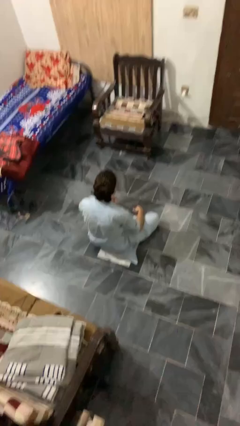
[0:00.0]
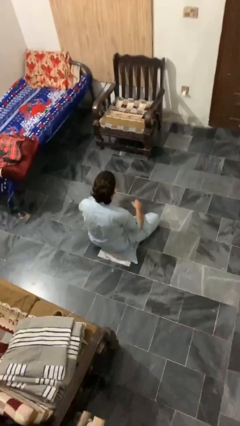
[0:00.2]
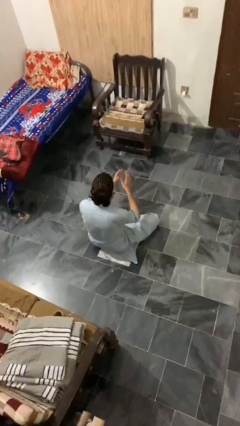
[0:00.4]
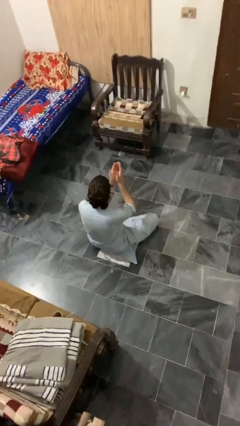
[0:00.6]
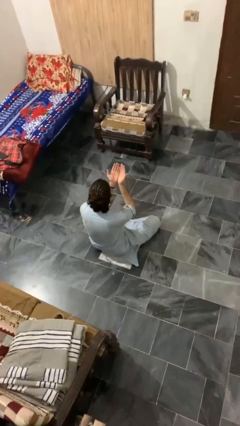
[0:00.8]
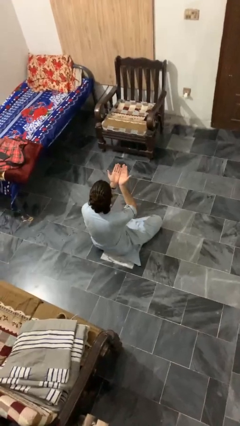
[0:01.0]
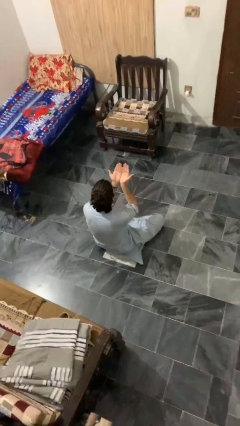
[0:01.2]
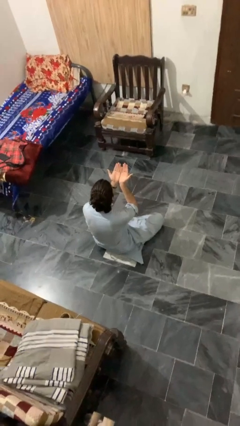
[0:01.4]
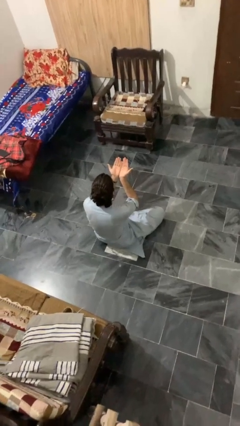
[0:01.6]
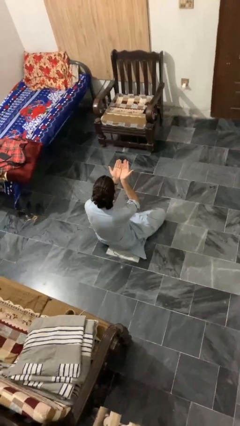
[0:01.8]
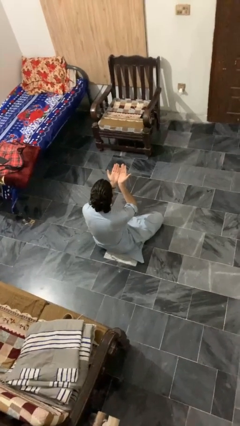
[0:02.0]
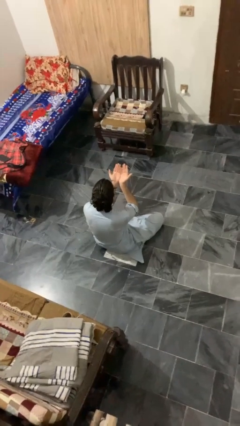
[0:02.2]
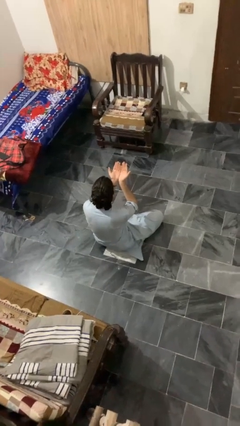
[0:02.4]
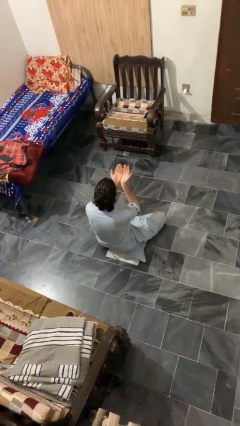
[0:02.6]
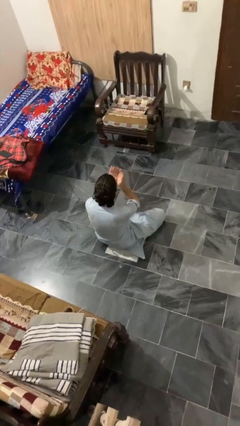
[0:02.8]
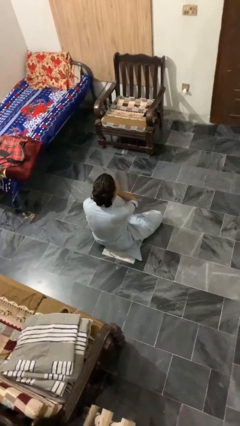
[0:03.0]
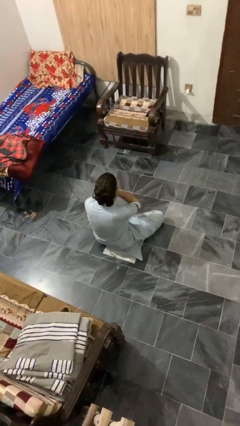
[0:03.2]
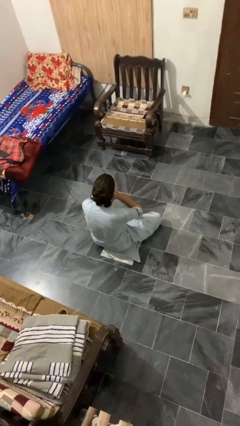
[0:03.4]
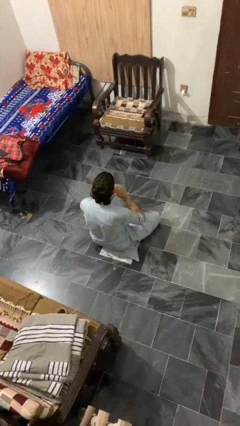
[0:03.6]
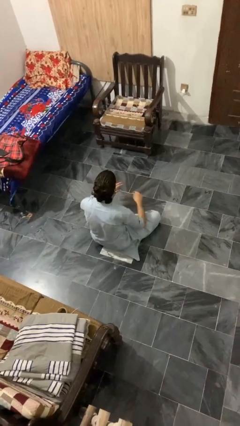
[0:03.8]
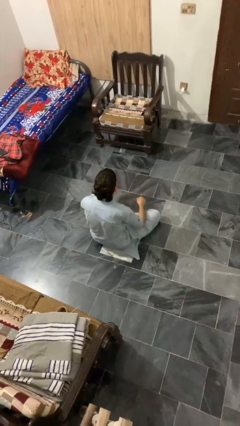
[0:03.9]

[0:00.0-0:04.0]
person prays

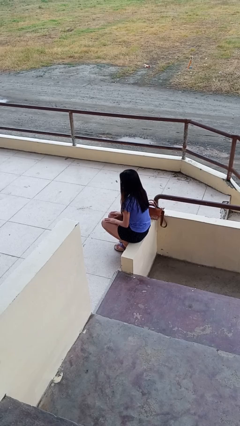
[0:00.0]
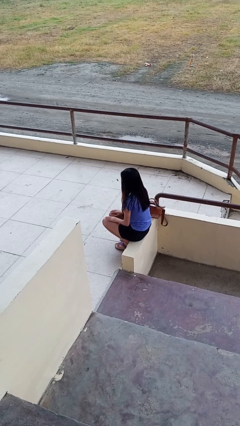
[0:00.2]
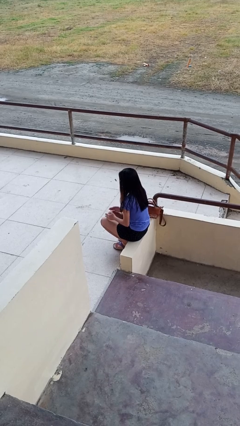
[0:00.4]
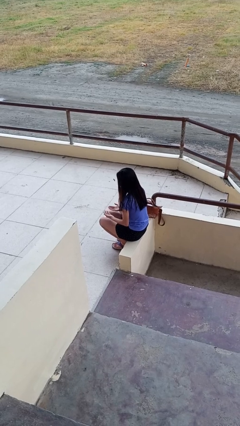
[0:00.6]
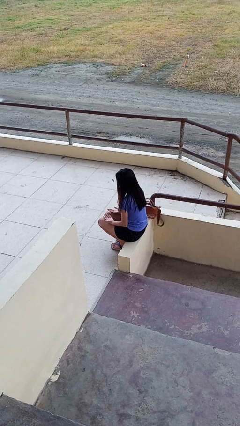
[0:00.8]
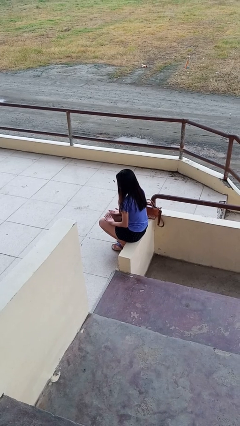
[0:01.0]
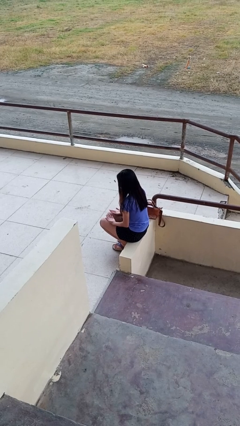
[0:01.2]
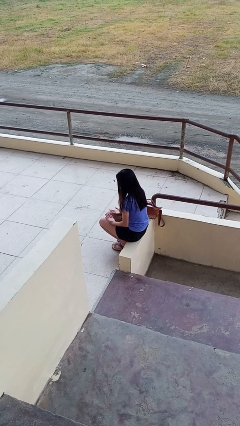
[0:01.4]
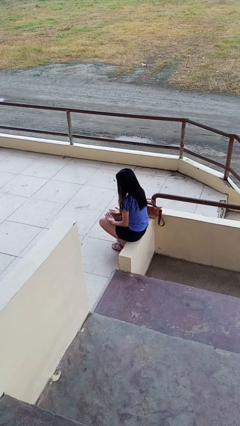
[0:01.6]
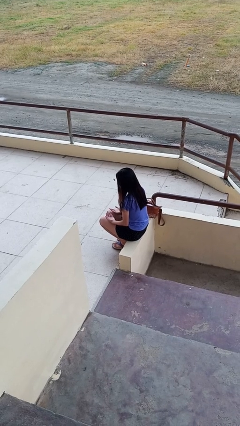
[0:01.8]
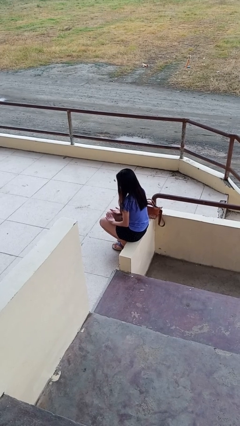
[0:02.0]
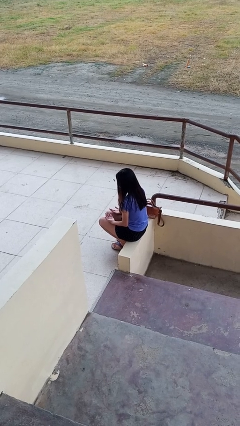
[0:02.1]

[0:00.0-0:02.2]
person looks at hands in lap

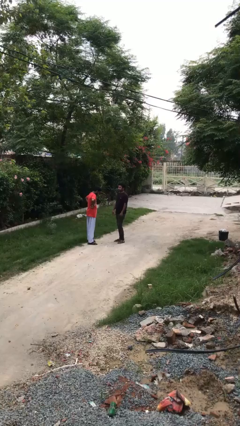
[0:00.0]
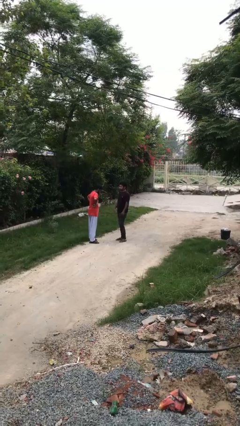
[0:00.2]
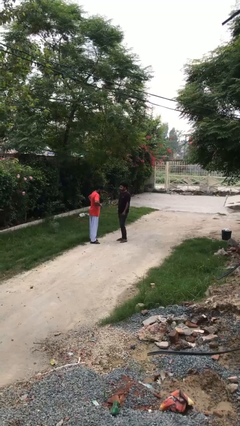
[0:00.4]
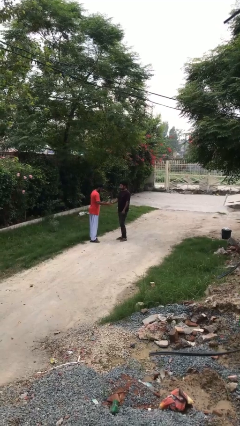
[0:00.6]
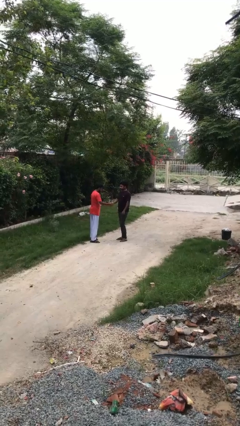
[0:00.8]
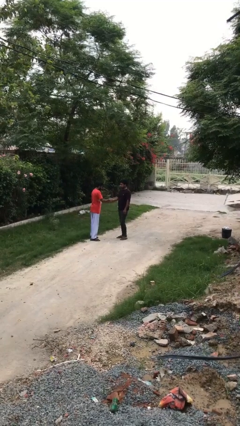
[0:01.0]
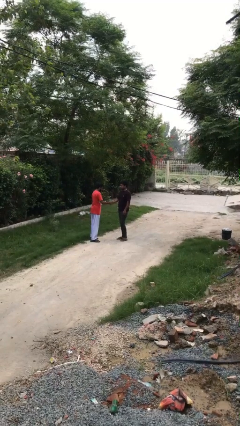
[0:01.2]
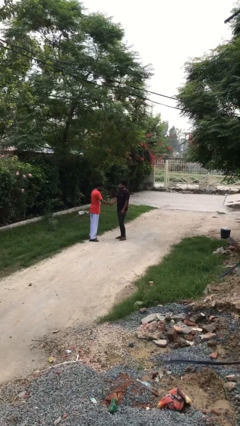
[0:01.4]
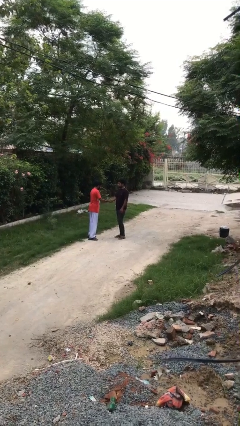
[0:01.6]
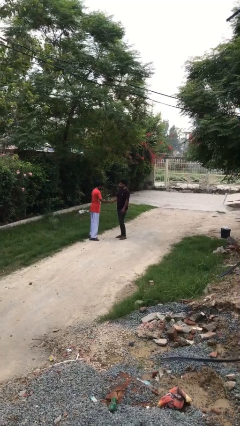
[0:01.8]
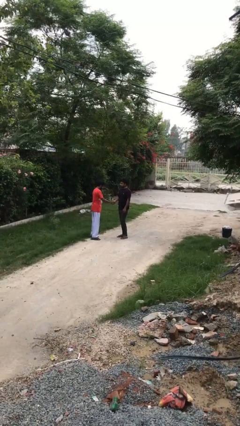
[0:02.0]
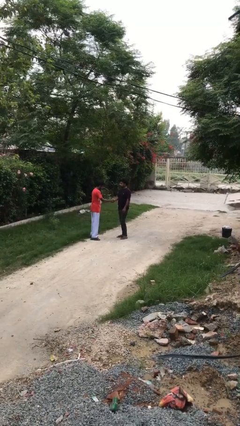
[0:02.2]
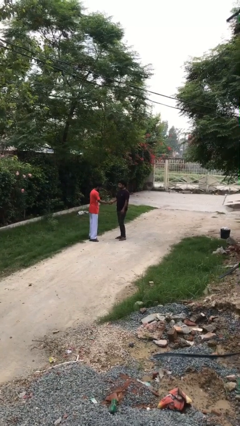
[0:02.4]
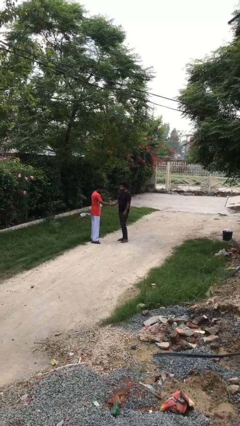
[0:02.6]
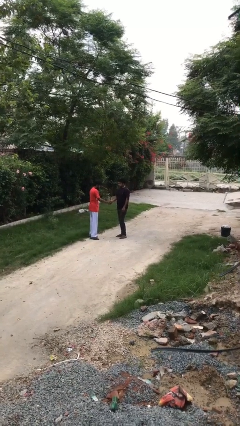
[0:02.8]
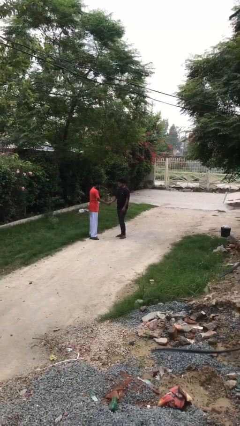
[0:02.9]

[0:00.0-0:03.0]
person shakes hand

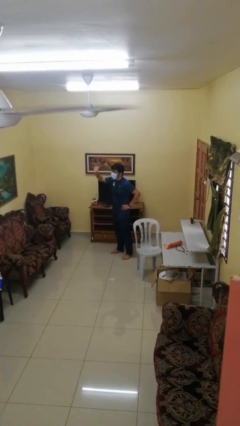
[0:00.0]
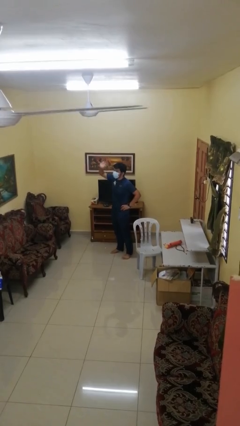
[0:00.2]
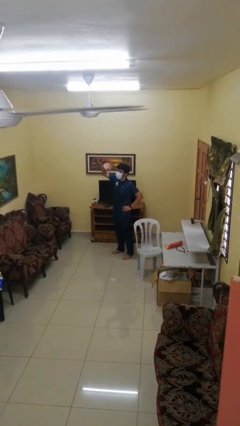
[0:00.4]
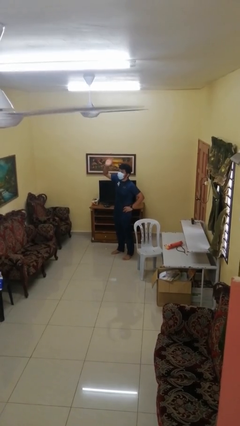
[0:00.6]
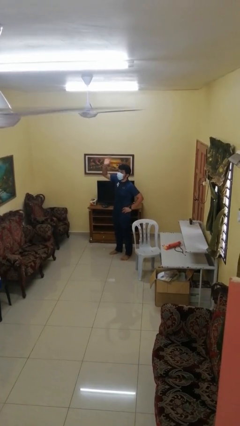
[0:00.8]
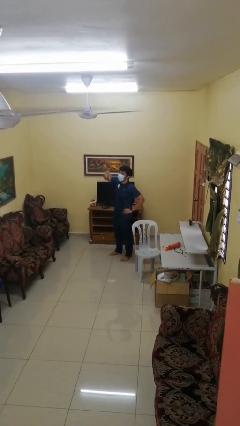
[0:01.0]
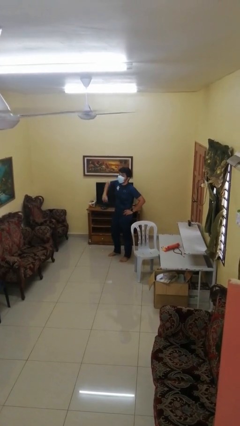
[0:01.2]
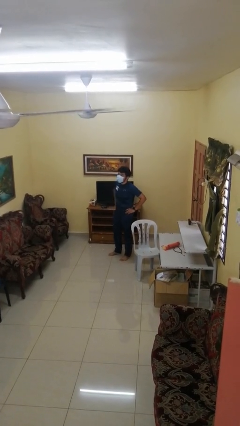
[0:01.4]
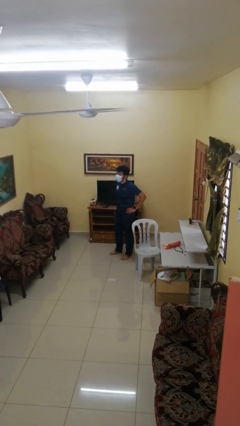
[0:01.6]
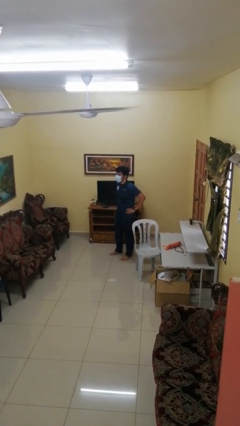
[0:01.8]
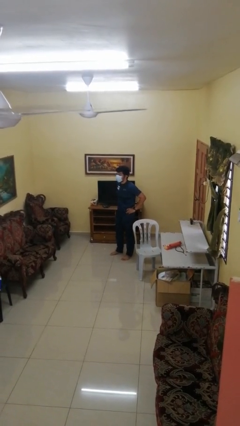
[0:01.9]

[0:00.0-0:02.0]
person waves at person

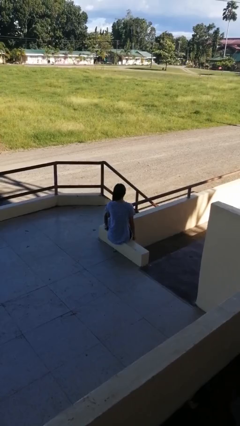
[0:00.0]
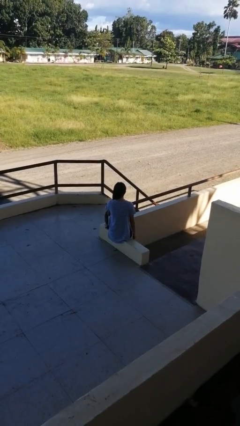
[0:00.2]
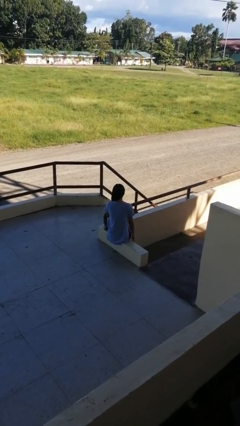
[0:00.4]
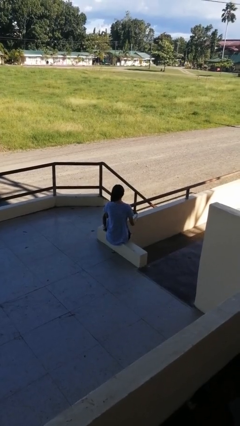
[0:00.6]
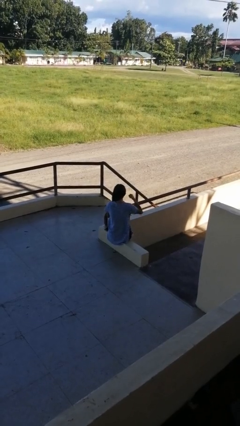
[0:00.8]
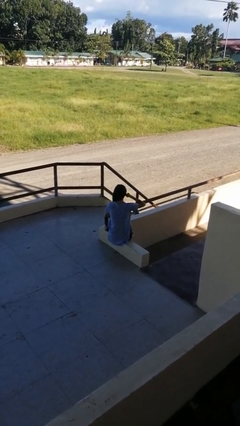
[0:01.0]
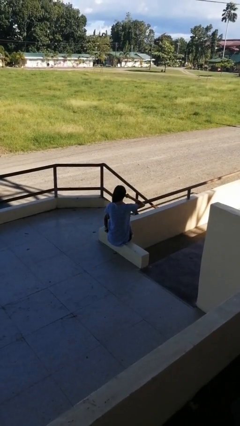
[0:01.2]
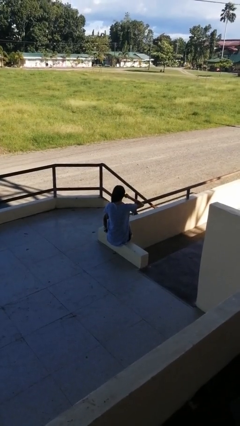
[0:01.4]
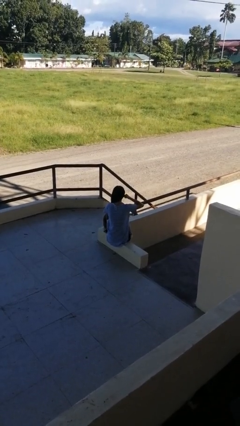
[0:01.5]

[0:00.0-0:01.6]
person gestures call me

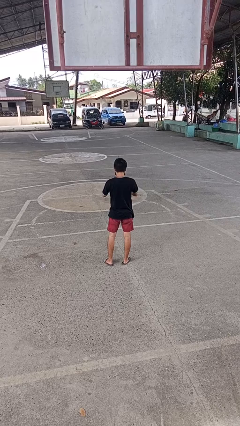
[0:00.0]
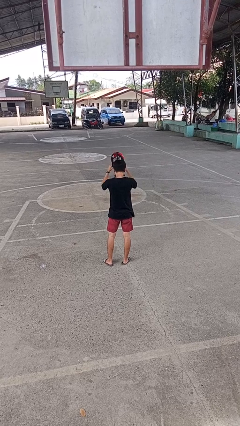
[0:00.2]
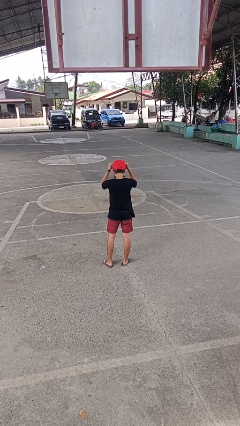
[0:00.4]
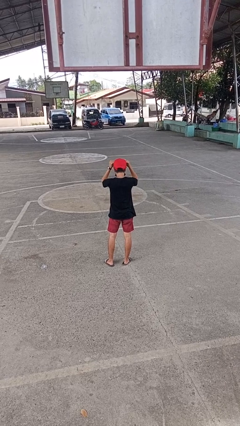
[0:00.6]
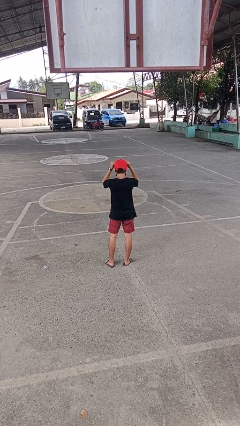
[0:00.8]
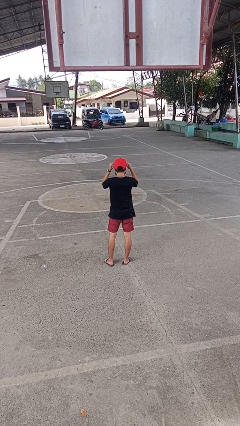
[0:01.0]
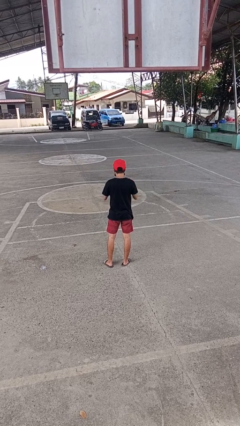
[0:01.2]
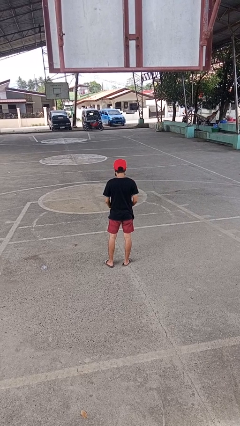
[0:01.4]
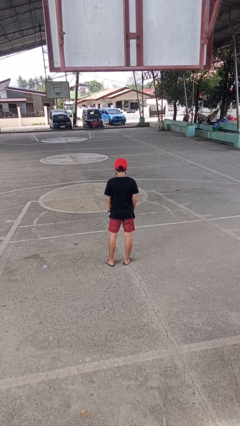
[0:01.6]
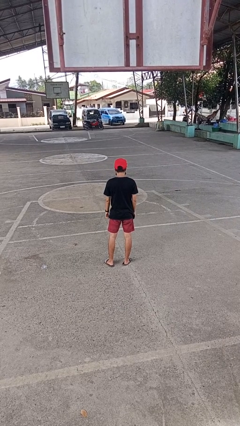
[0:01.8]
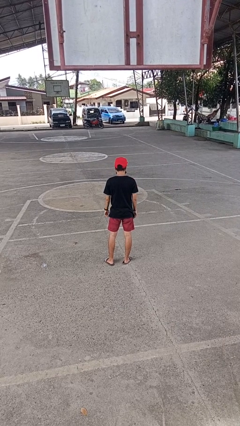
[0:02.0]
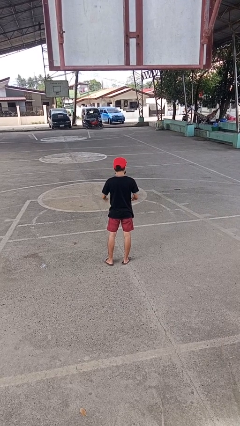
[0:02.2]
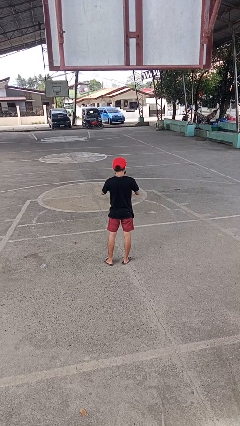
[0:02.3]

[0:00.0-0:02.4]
person puts on hat

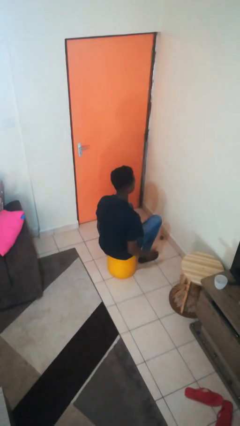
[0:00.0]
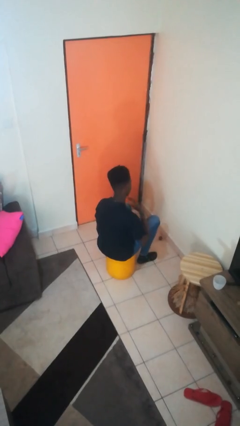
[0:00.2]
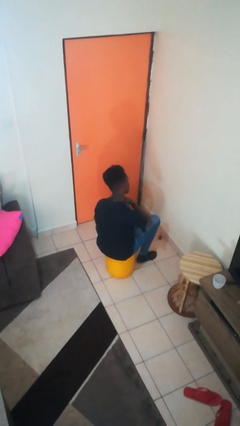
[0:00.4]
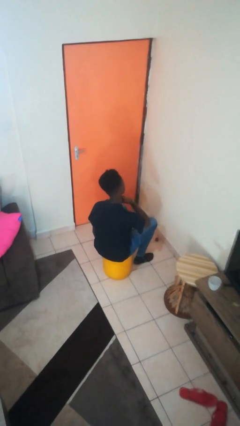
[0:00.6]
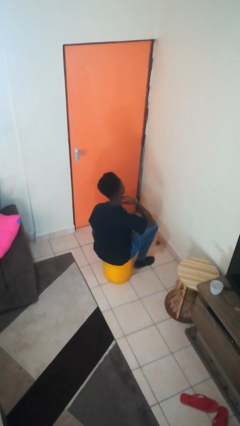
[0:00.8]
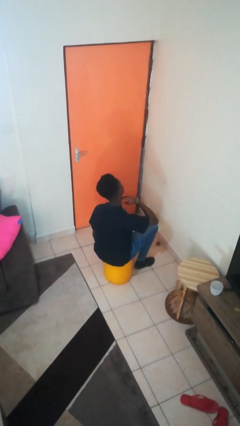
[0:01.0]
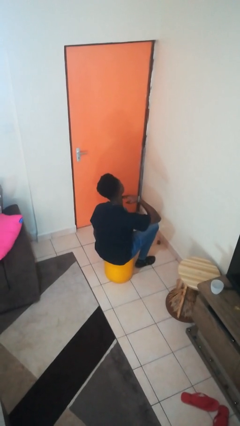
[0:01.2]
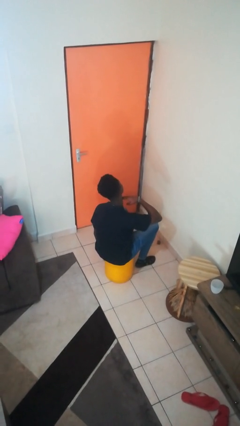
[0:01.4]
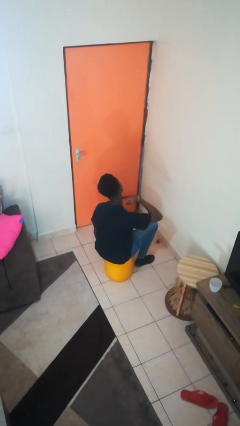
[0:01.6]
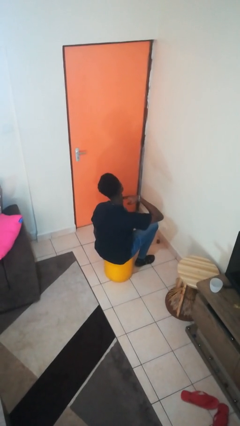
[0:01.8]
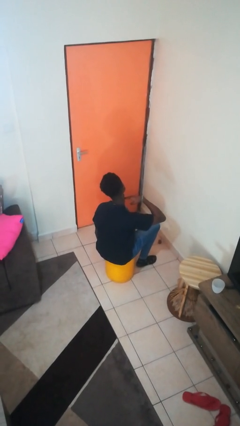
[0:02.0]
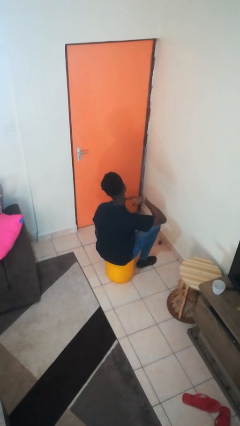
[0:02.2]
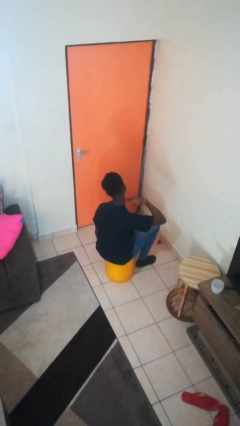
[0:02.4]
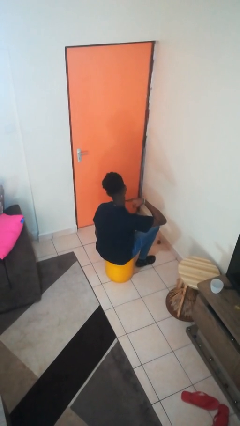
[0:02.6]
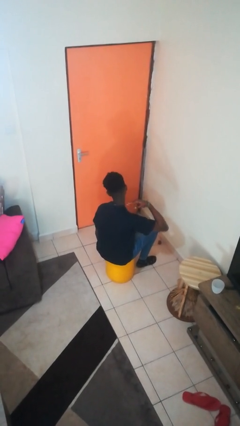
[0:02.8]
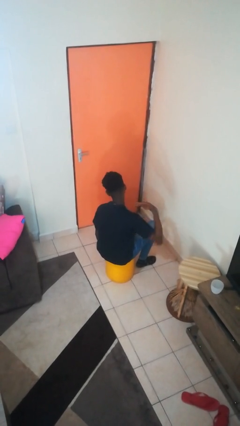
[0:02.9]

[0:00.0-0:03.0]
person gestures cut
